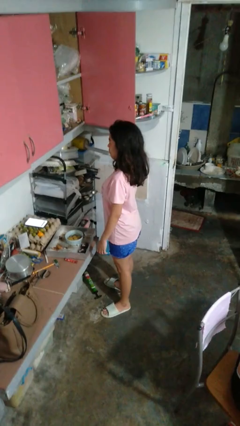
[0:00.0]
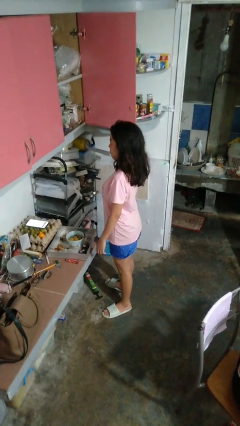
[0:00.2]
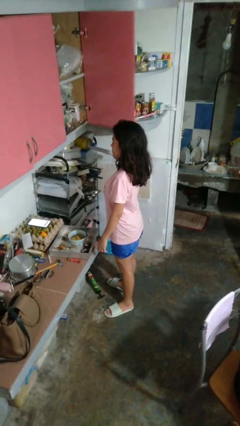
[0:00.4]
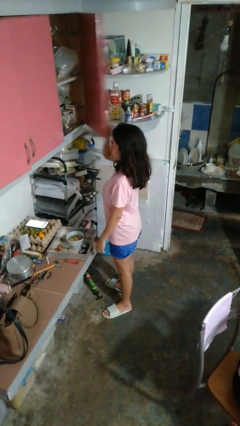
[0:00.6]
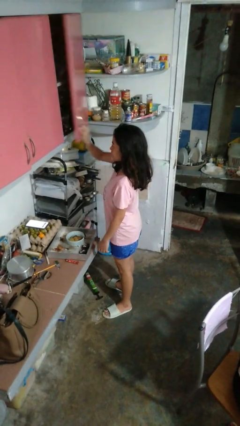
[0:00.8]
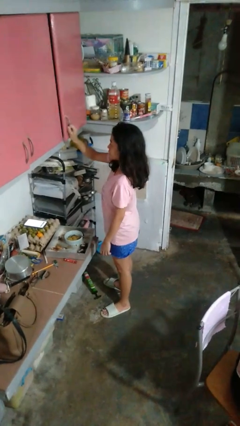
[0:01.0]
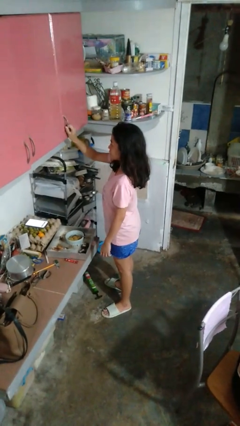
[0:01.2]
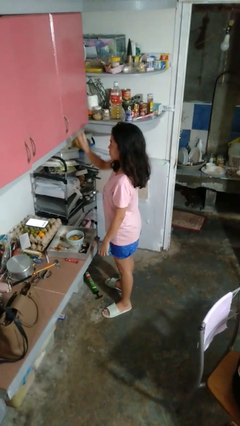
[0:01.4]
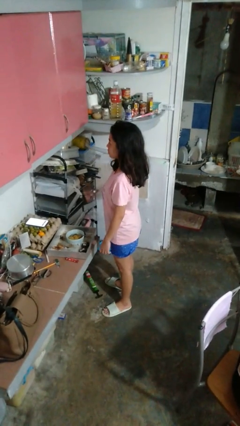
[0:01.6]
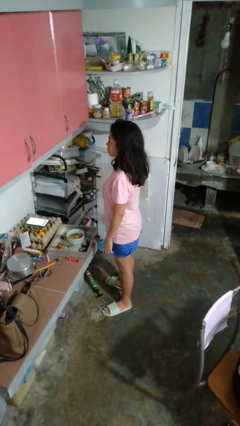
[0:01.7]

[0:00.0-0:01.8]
person closes cabinet

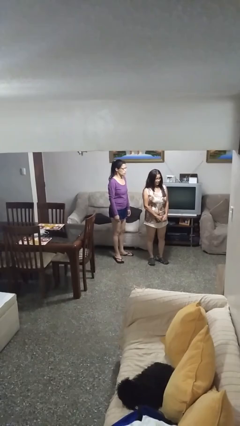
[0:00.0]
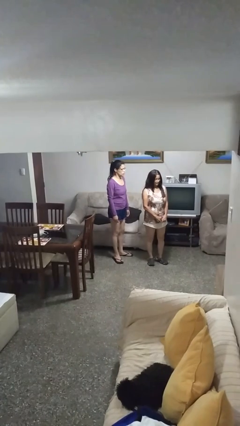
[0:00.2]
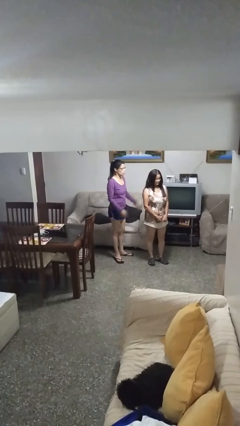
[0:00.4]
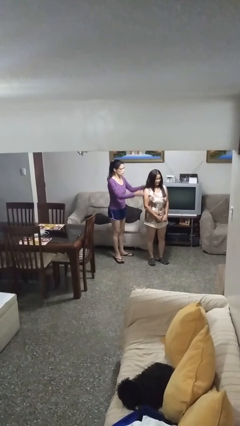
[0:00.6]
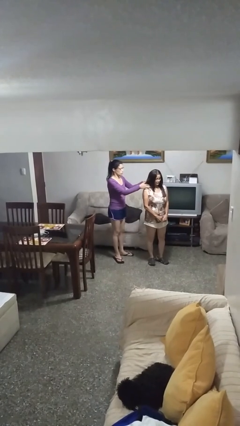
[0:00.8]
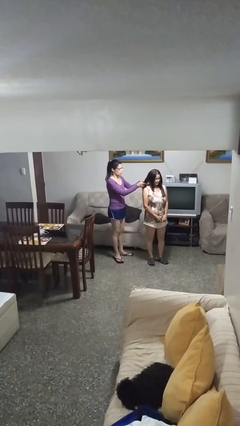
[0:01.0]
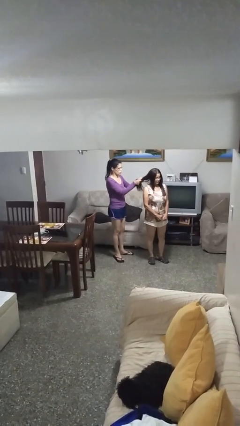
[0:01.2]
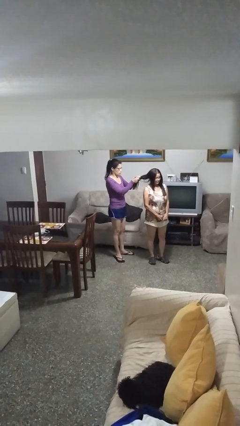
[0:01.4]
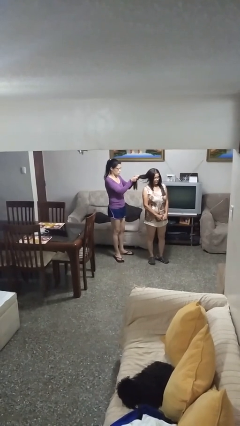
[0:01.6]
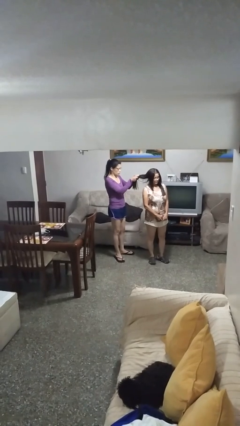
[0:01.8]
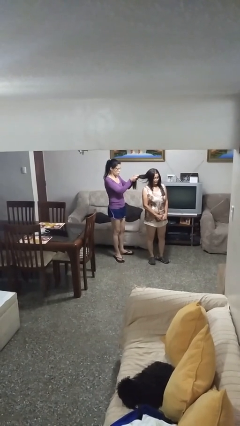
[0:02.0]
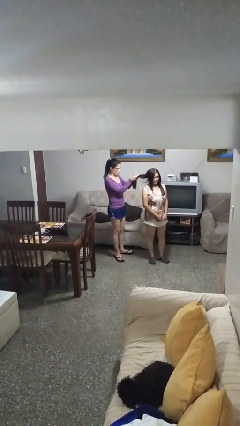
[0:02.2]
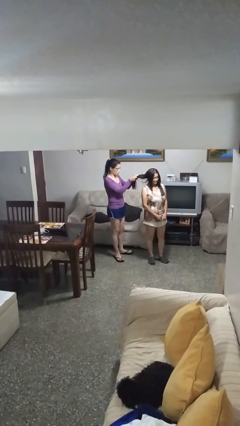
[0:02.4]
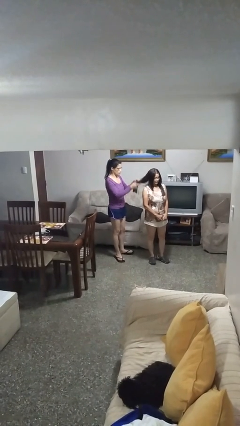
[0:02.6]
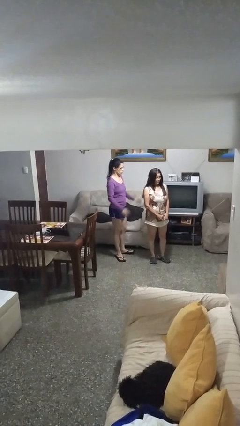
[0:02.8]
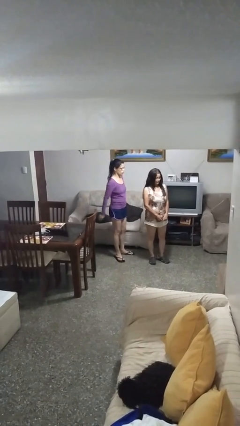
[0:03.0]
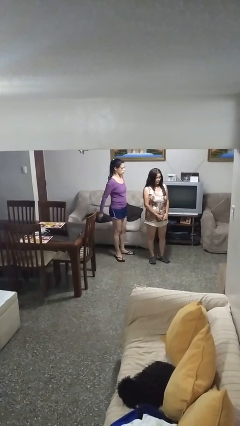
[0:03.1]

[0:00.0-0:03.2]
person grabs person by hair

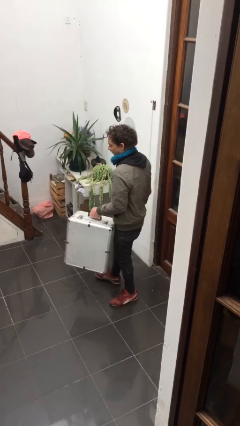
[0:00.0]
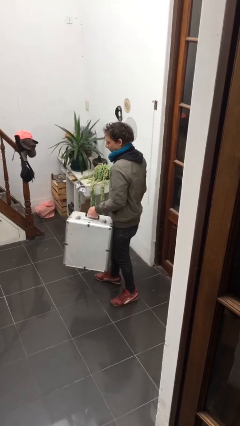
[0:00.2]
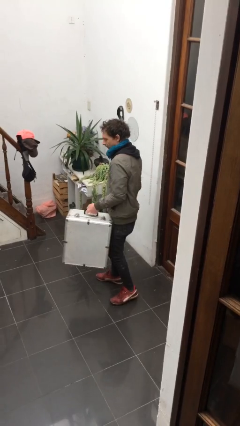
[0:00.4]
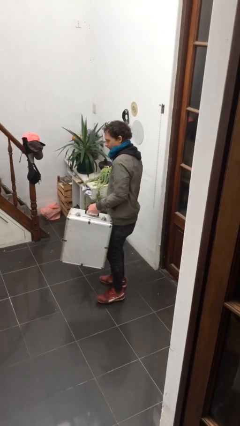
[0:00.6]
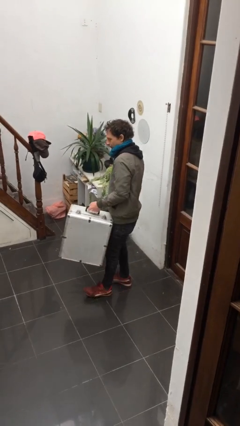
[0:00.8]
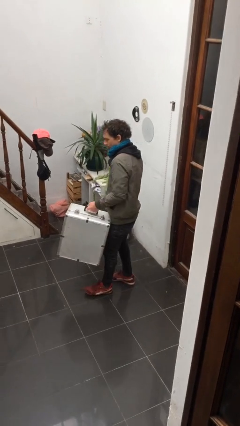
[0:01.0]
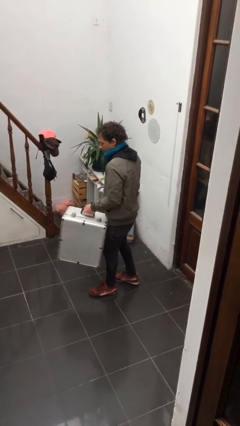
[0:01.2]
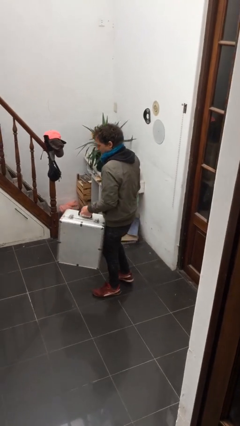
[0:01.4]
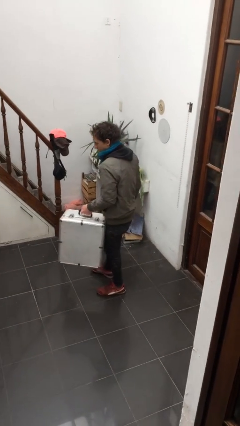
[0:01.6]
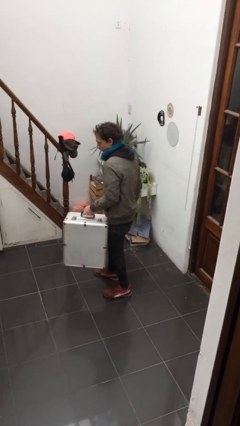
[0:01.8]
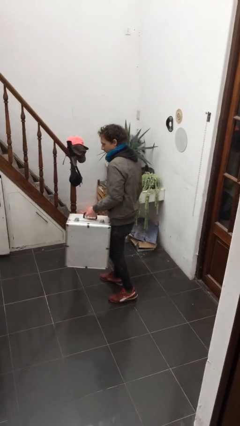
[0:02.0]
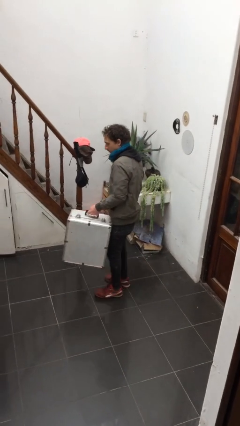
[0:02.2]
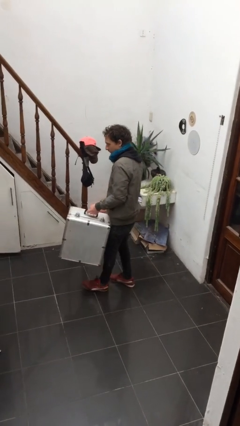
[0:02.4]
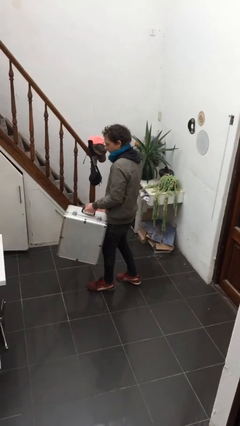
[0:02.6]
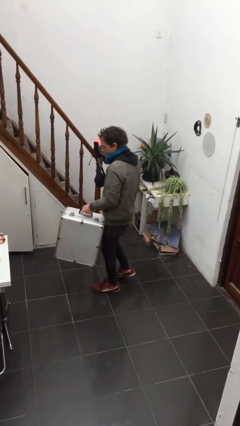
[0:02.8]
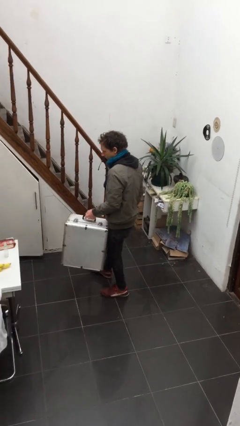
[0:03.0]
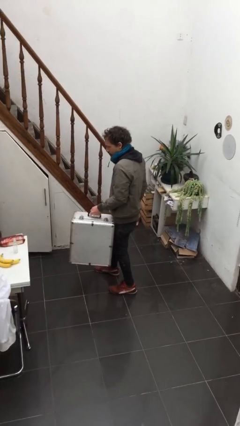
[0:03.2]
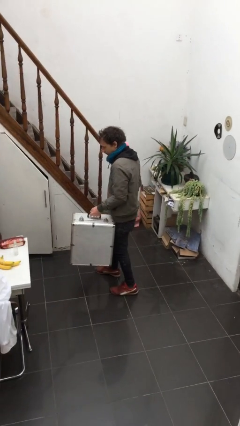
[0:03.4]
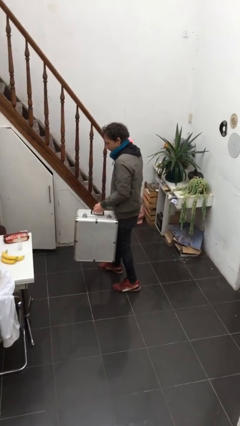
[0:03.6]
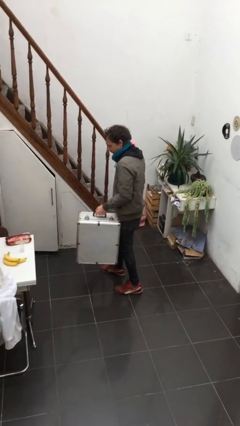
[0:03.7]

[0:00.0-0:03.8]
person carries heavy object

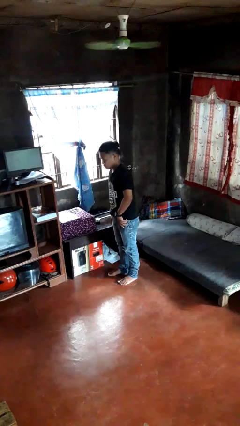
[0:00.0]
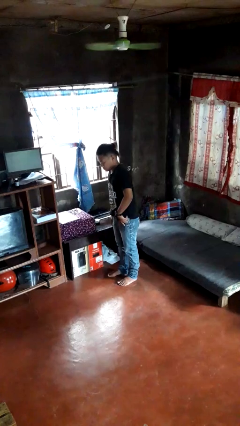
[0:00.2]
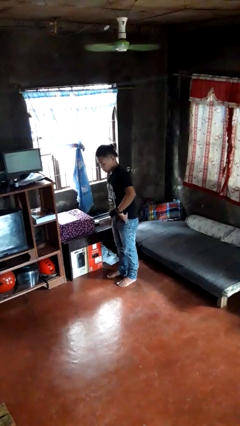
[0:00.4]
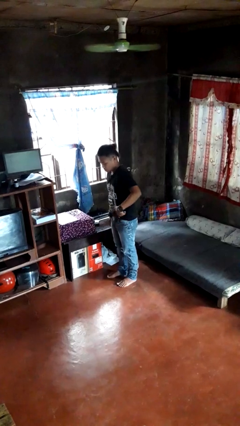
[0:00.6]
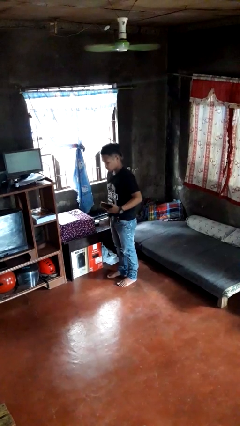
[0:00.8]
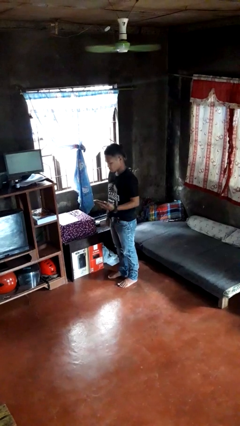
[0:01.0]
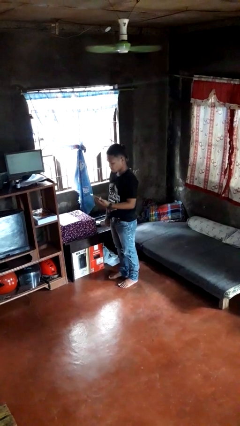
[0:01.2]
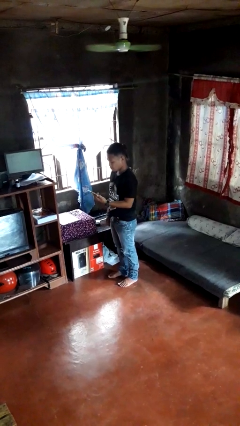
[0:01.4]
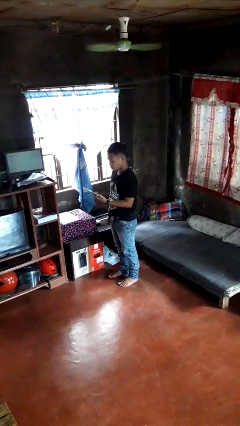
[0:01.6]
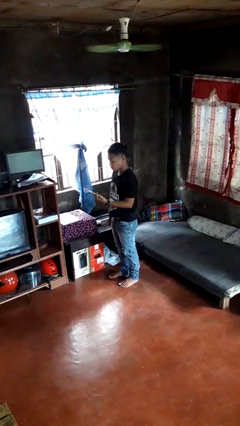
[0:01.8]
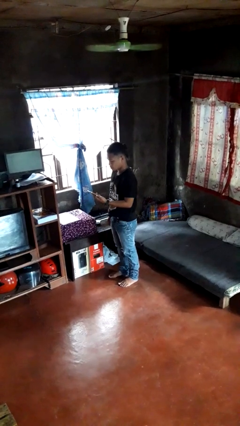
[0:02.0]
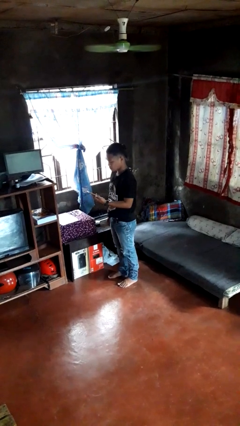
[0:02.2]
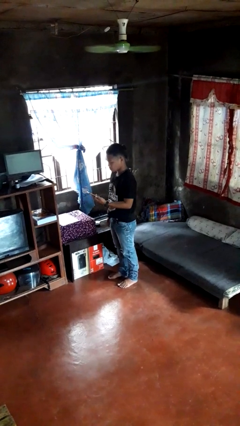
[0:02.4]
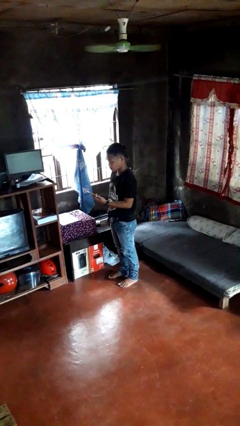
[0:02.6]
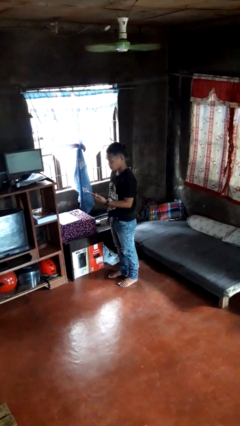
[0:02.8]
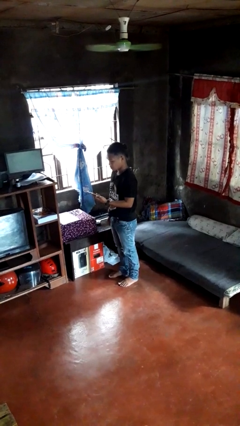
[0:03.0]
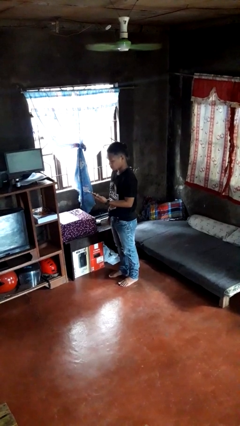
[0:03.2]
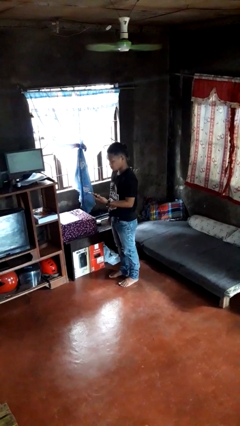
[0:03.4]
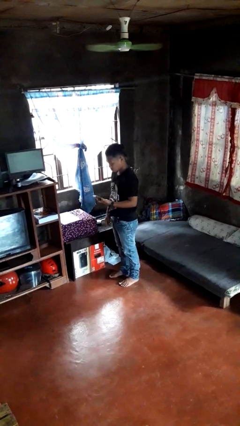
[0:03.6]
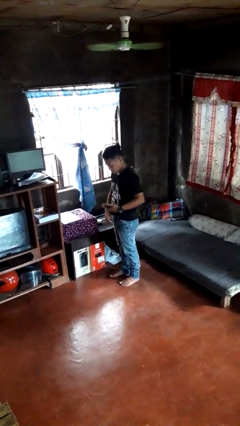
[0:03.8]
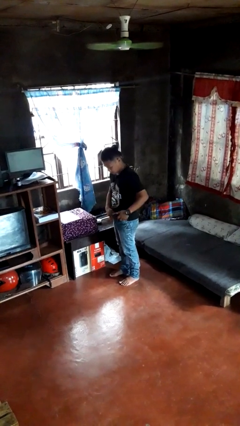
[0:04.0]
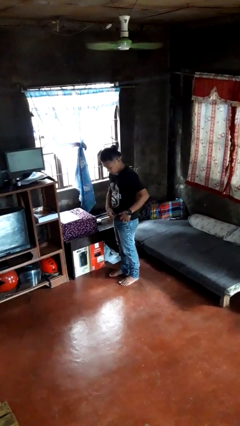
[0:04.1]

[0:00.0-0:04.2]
person takes phone from pocket

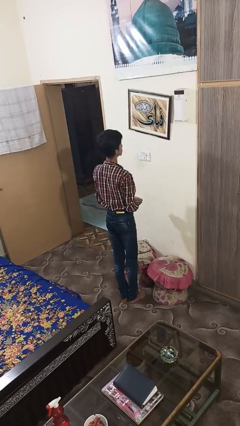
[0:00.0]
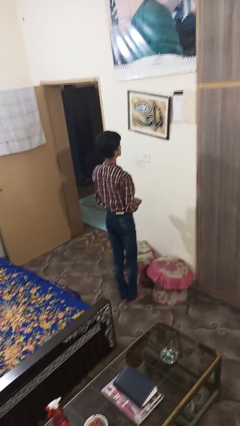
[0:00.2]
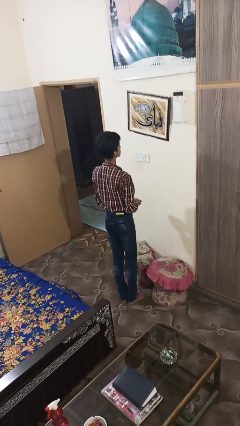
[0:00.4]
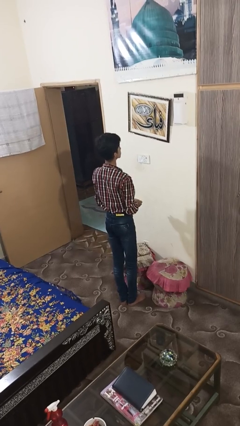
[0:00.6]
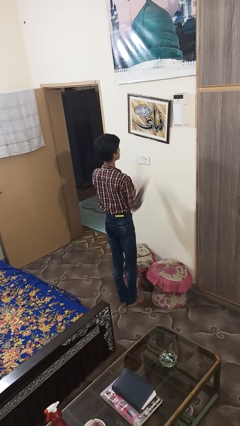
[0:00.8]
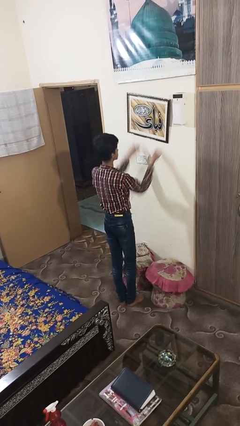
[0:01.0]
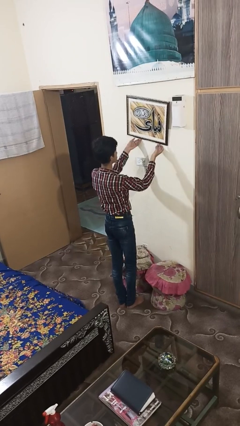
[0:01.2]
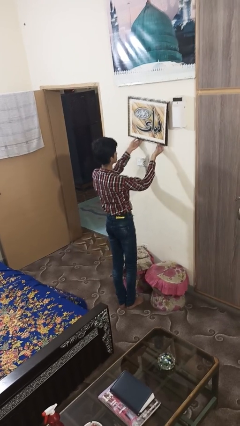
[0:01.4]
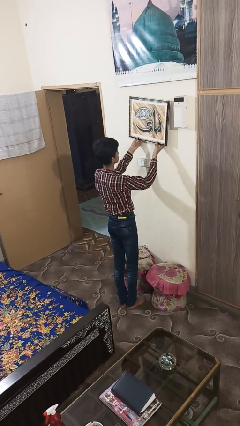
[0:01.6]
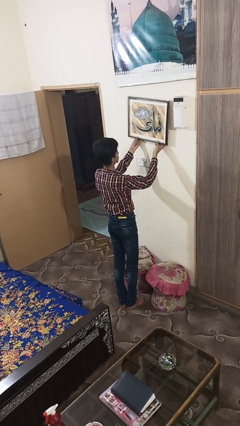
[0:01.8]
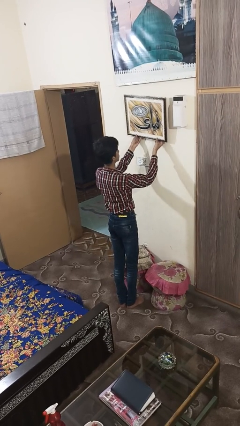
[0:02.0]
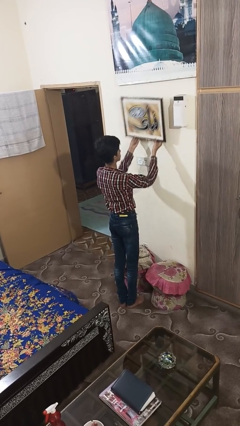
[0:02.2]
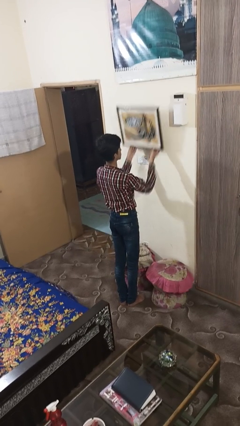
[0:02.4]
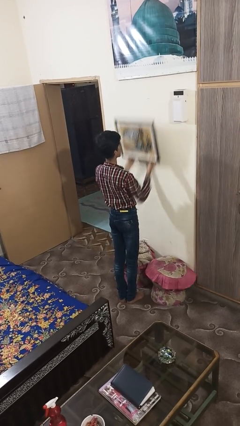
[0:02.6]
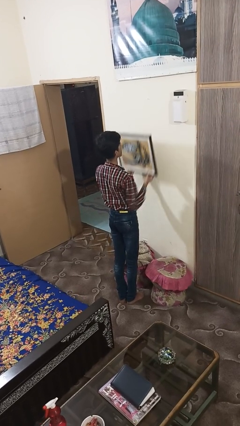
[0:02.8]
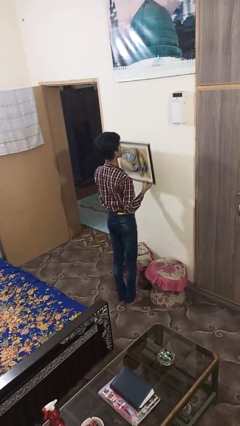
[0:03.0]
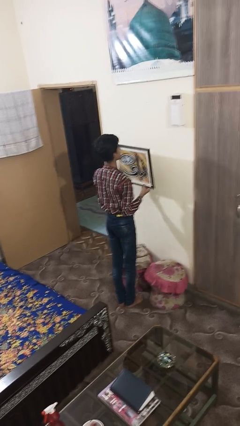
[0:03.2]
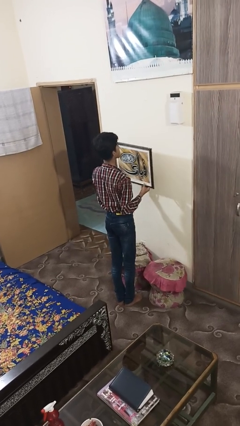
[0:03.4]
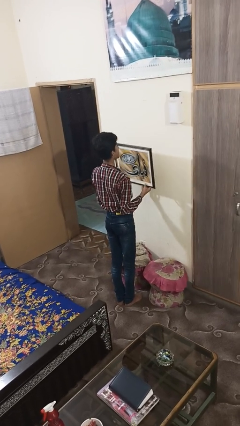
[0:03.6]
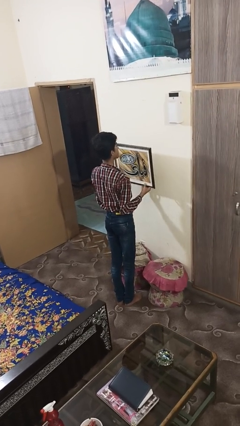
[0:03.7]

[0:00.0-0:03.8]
person takes down picture frame

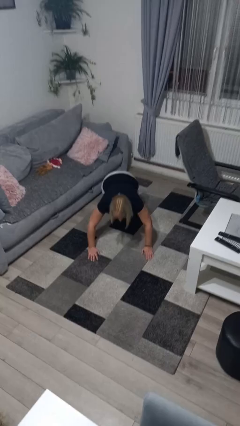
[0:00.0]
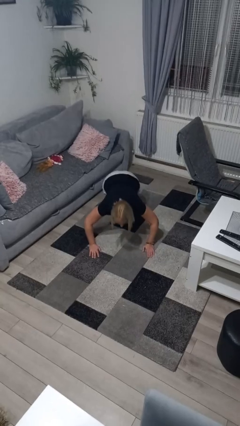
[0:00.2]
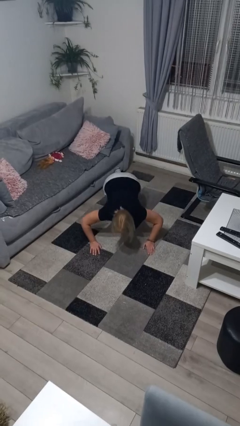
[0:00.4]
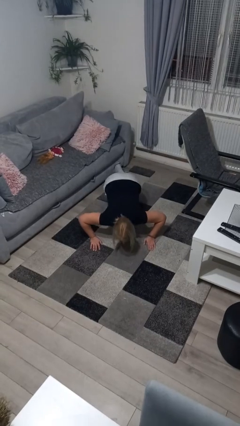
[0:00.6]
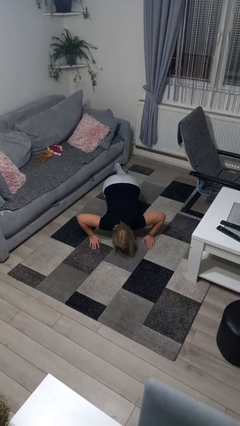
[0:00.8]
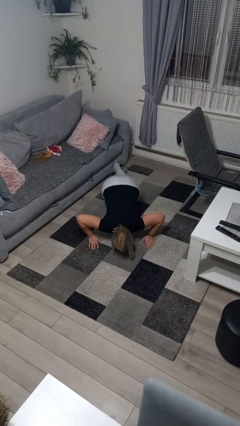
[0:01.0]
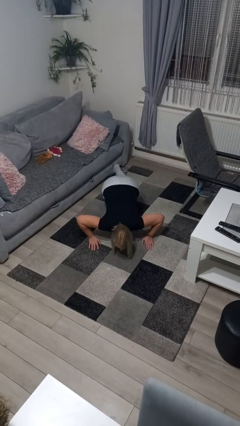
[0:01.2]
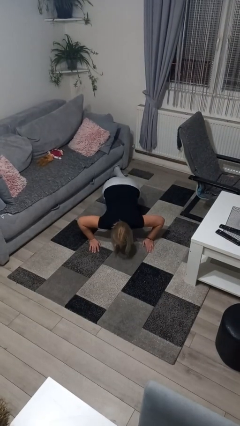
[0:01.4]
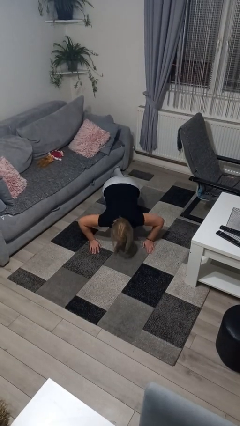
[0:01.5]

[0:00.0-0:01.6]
person exercises with pushup
